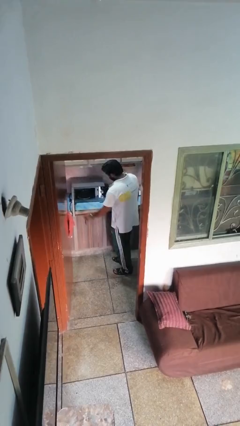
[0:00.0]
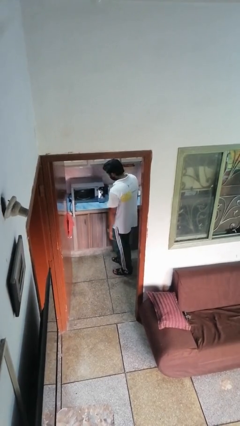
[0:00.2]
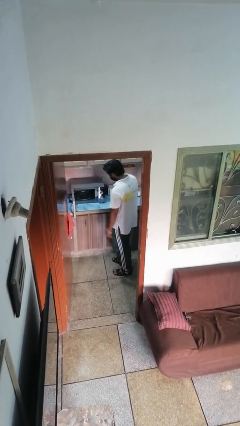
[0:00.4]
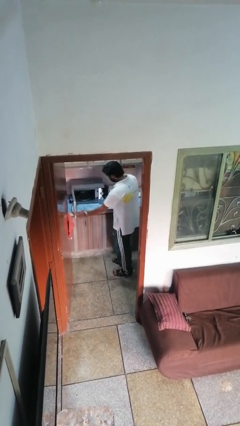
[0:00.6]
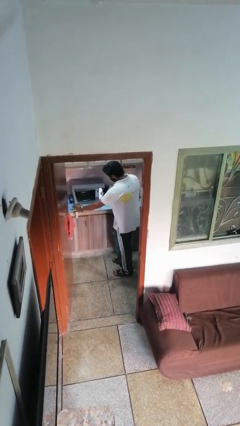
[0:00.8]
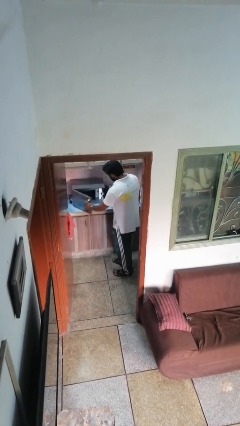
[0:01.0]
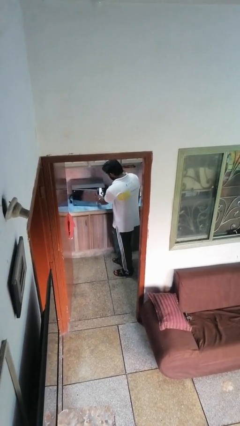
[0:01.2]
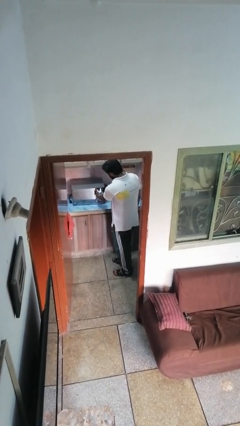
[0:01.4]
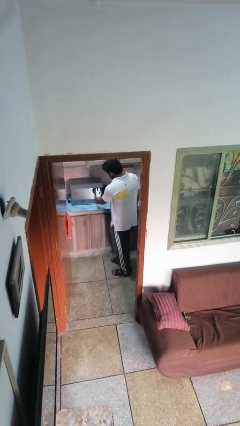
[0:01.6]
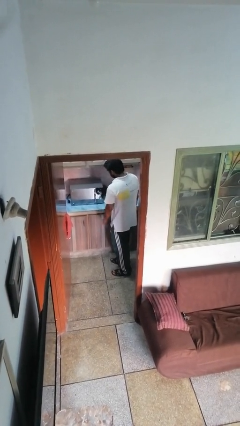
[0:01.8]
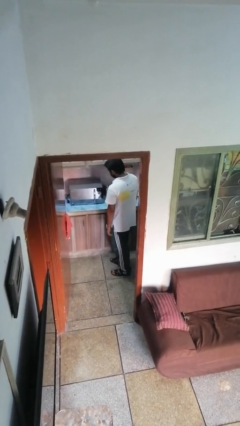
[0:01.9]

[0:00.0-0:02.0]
person closes microwave

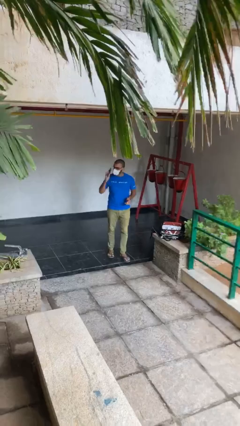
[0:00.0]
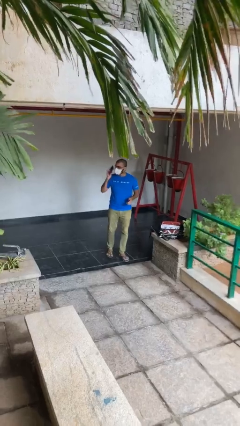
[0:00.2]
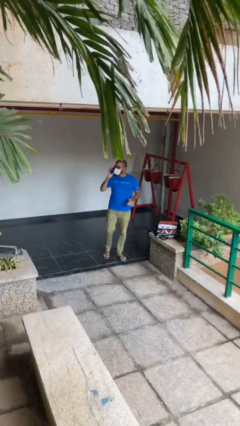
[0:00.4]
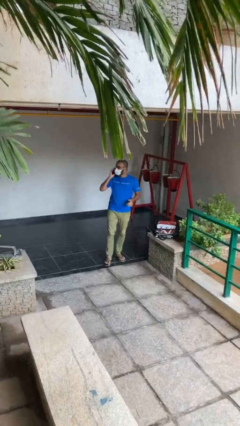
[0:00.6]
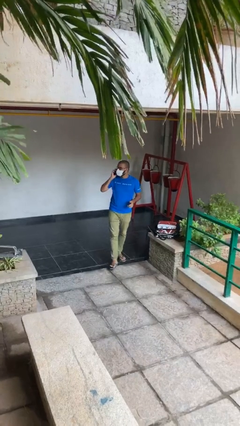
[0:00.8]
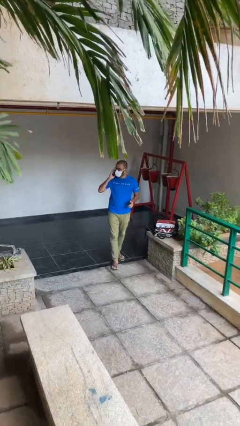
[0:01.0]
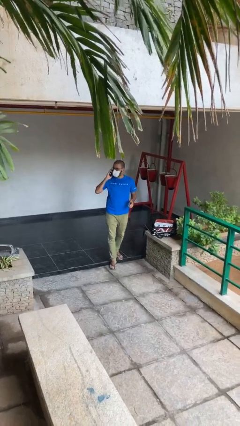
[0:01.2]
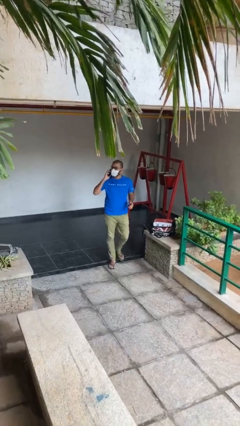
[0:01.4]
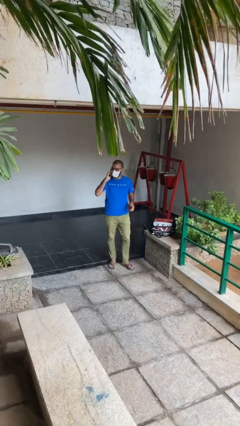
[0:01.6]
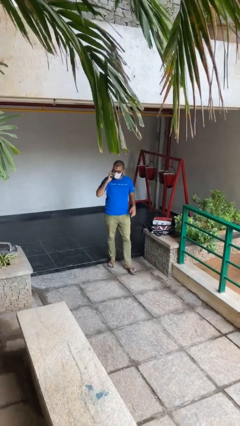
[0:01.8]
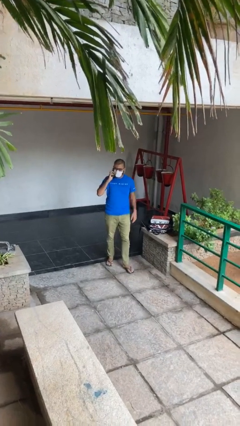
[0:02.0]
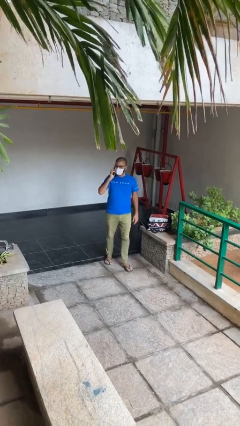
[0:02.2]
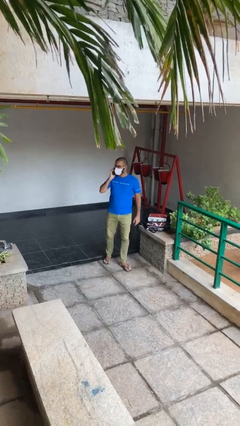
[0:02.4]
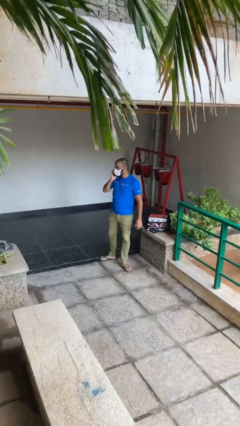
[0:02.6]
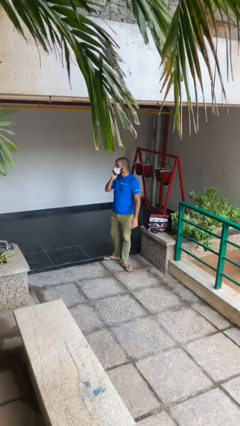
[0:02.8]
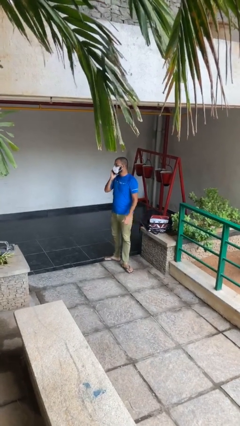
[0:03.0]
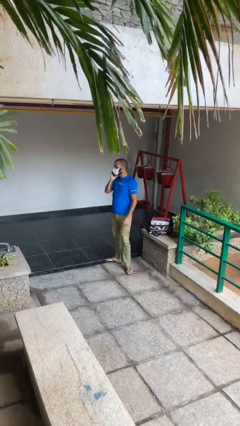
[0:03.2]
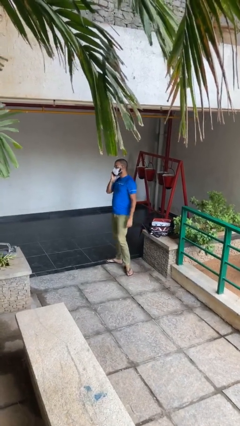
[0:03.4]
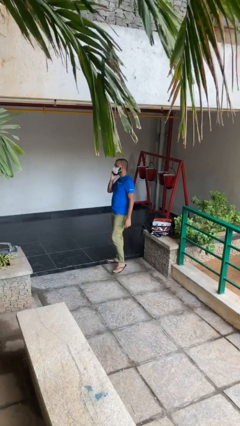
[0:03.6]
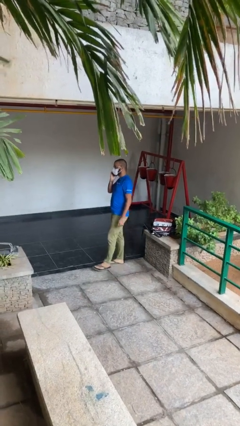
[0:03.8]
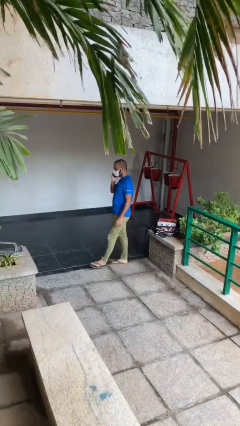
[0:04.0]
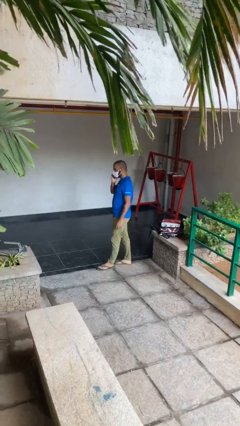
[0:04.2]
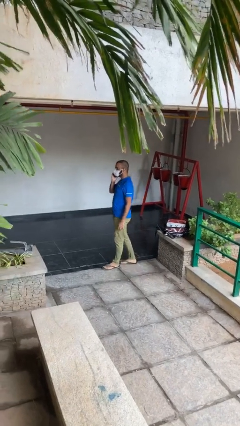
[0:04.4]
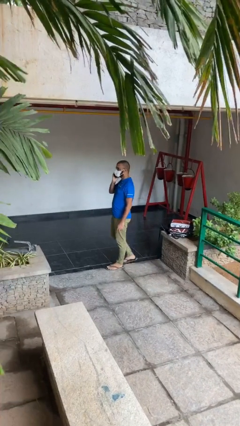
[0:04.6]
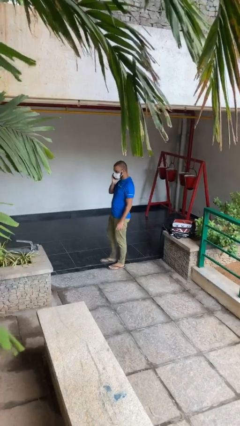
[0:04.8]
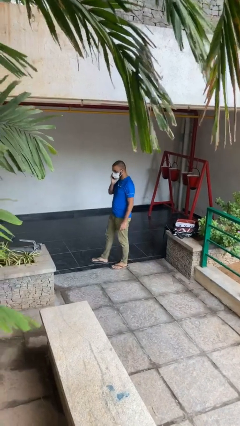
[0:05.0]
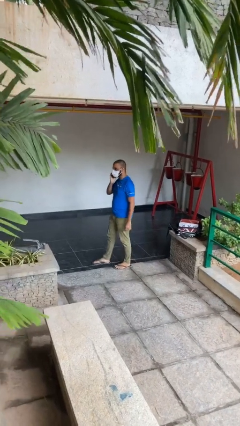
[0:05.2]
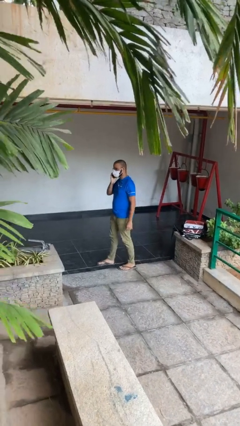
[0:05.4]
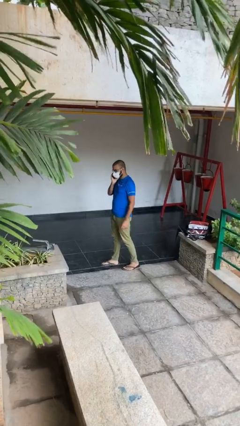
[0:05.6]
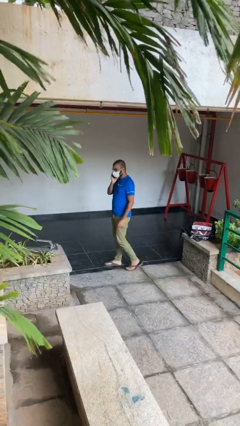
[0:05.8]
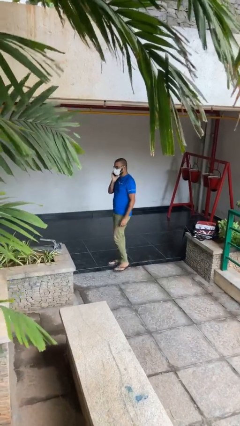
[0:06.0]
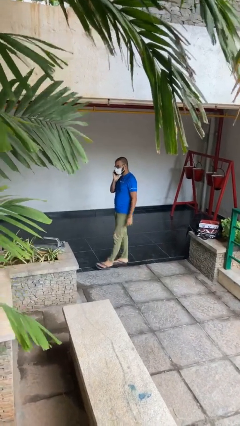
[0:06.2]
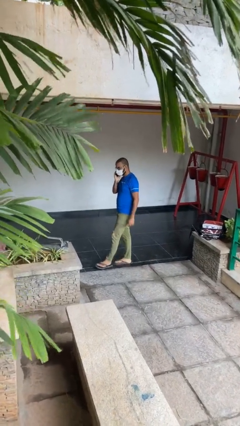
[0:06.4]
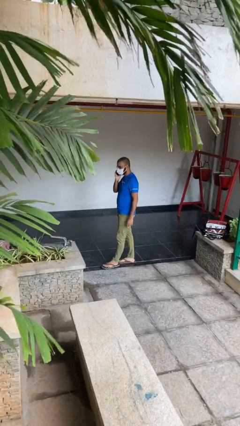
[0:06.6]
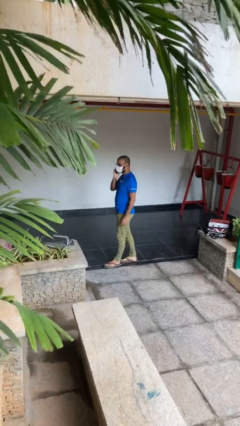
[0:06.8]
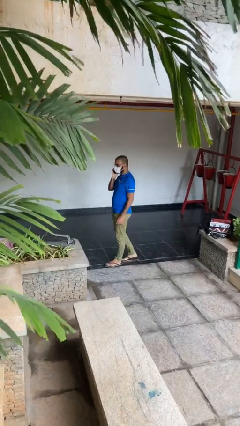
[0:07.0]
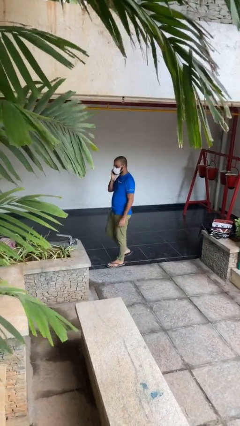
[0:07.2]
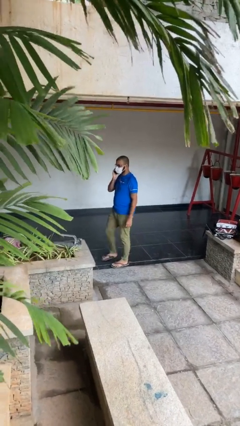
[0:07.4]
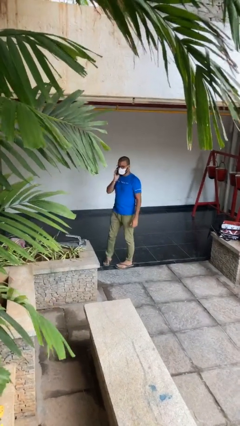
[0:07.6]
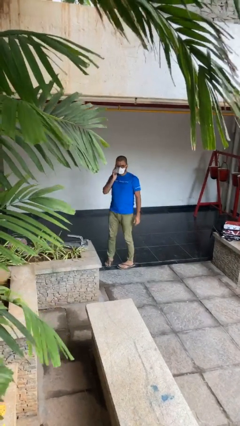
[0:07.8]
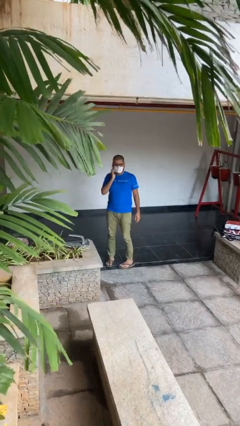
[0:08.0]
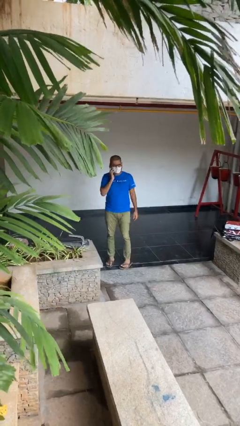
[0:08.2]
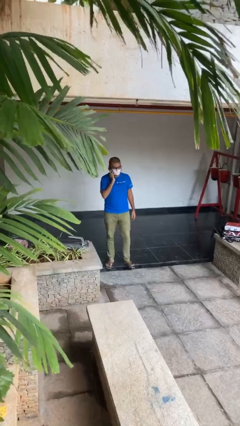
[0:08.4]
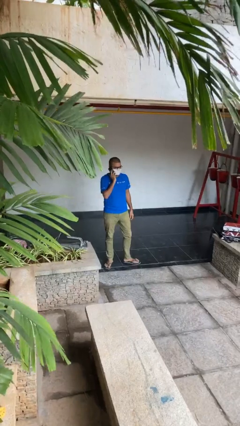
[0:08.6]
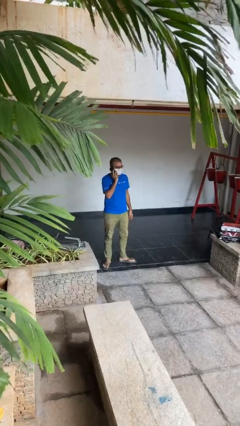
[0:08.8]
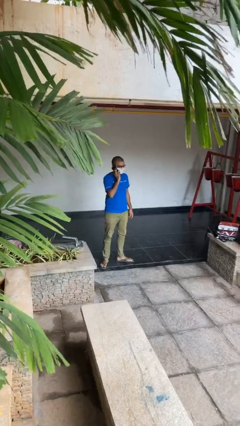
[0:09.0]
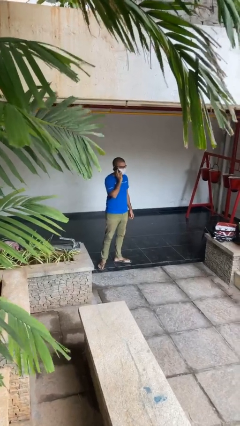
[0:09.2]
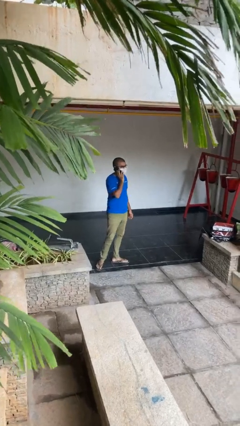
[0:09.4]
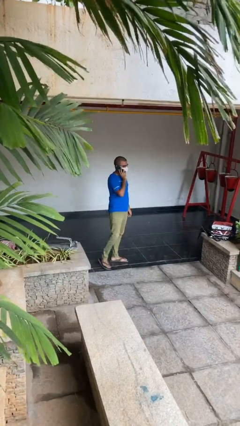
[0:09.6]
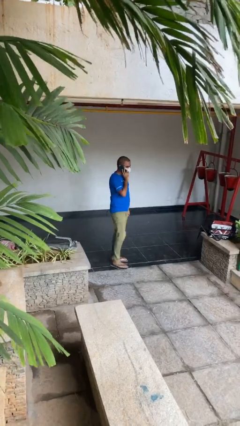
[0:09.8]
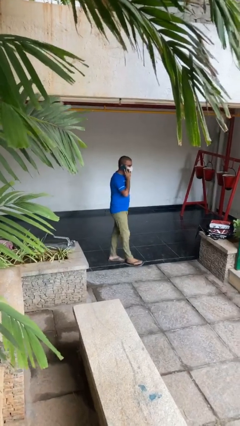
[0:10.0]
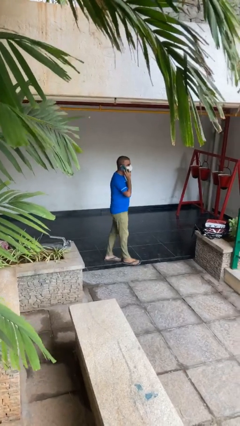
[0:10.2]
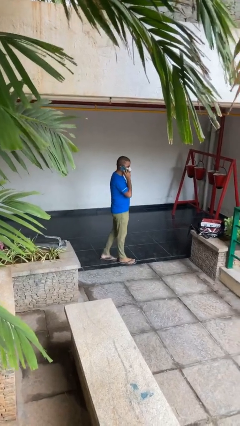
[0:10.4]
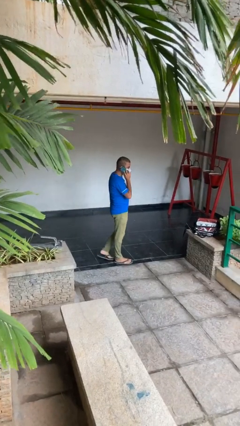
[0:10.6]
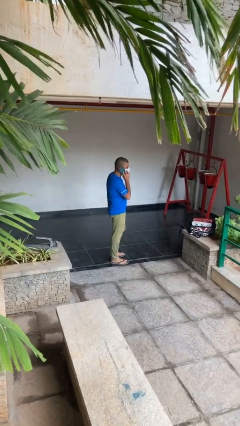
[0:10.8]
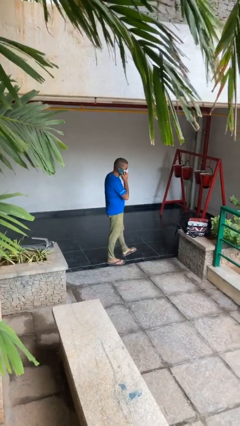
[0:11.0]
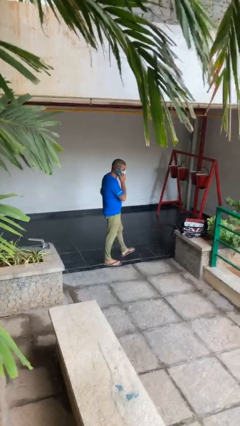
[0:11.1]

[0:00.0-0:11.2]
person talks on phone

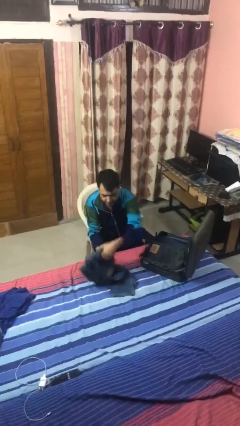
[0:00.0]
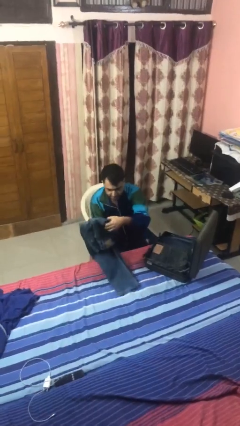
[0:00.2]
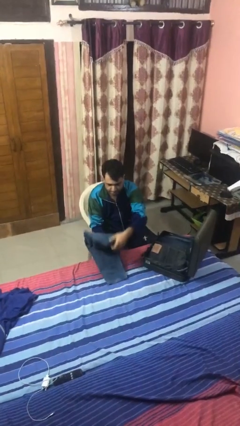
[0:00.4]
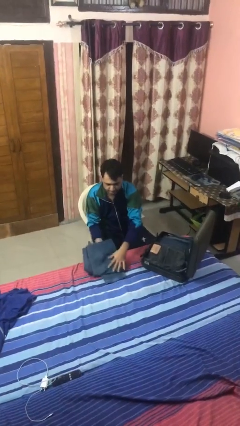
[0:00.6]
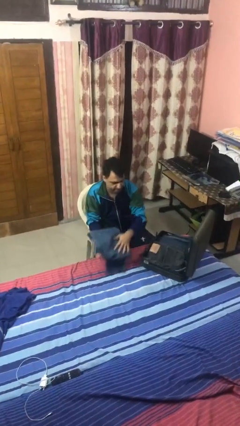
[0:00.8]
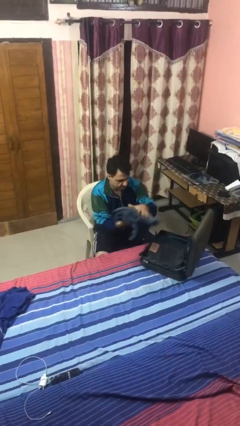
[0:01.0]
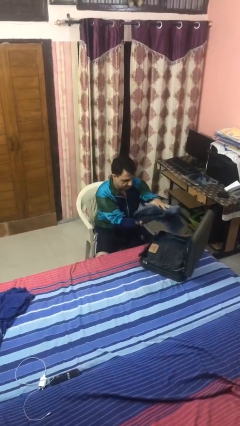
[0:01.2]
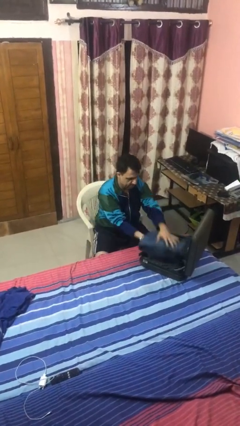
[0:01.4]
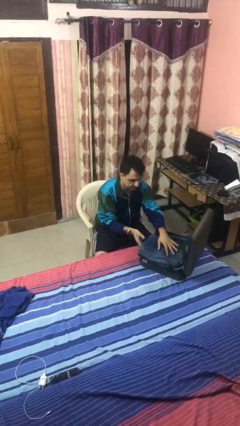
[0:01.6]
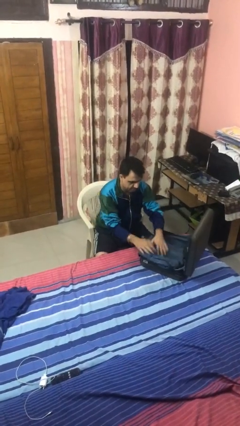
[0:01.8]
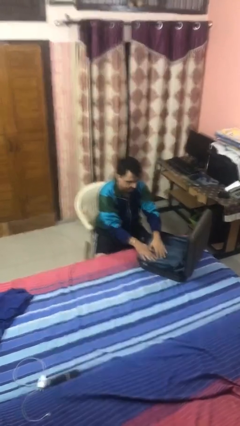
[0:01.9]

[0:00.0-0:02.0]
person loads clothes into suitcase

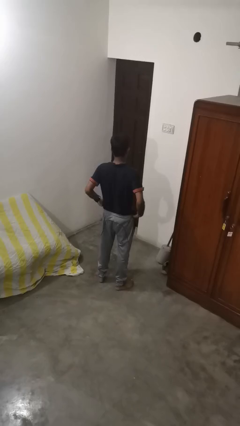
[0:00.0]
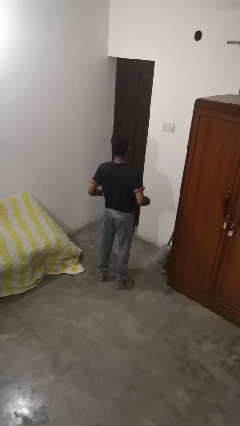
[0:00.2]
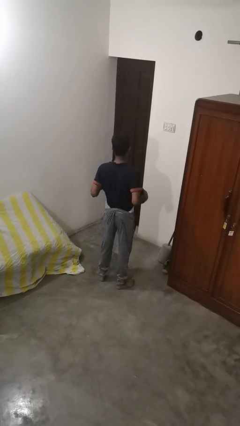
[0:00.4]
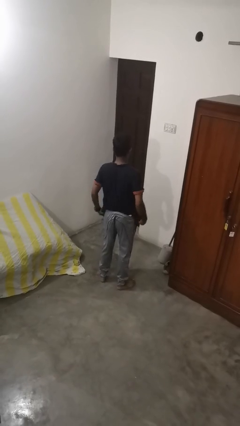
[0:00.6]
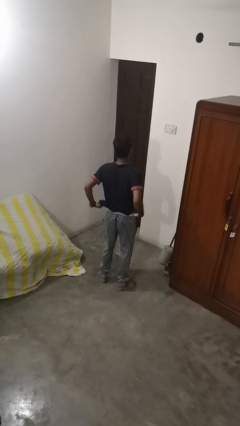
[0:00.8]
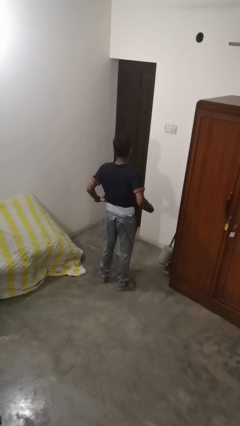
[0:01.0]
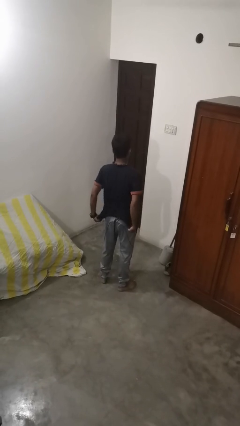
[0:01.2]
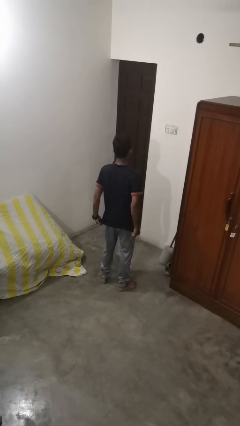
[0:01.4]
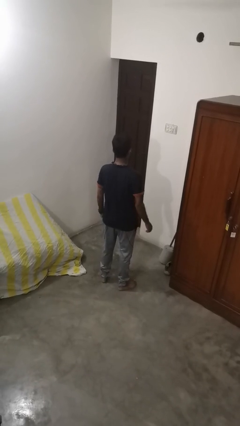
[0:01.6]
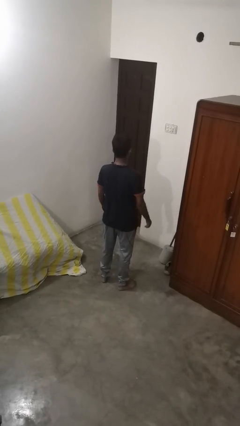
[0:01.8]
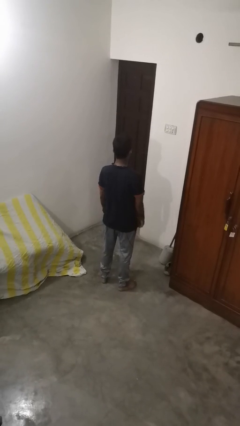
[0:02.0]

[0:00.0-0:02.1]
person untucks shirt

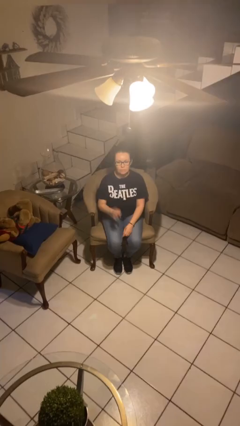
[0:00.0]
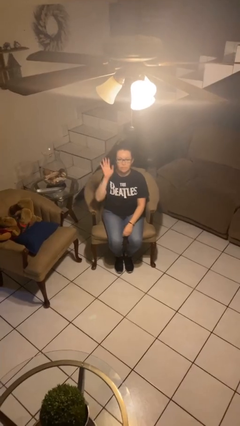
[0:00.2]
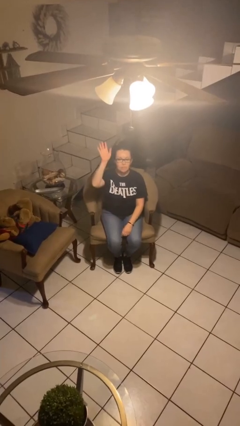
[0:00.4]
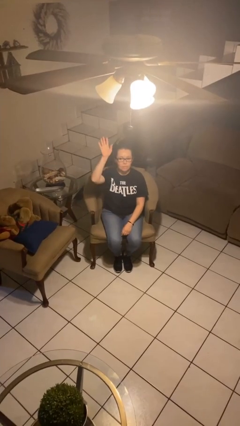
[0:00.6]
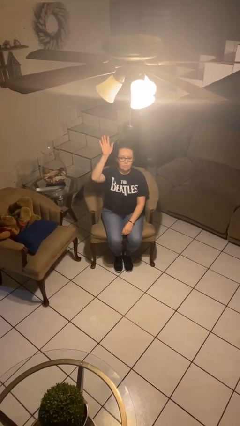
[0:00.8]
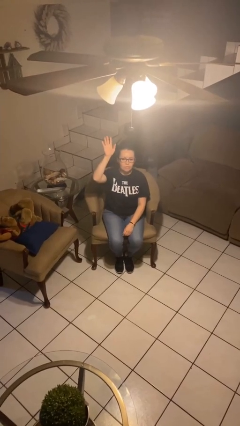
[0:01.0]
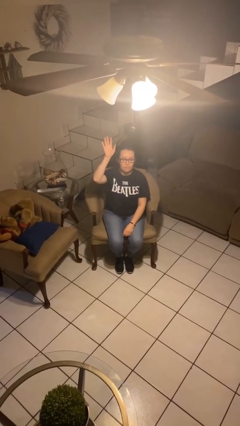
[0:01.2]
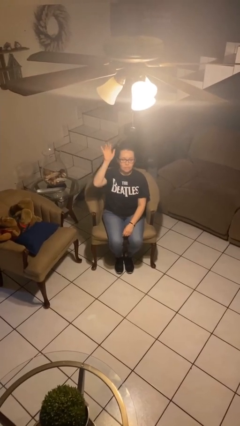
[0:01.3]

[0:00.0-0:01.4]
person gestures raise hand
